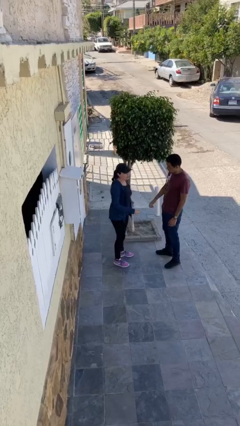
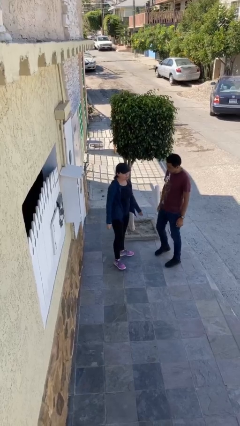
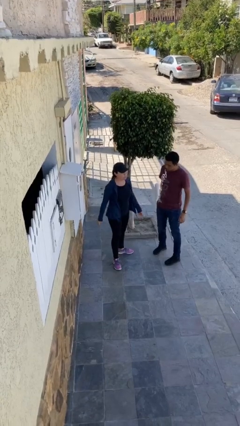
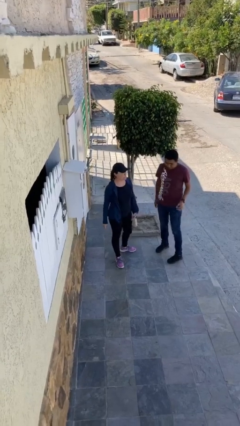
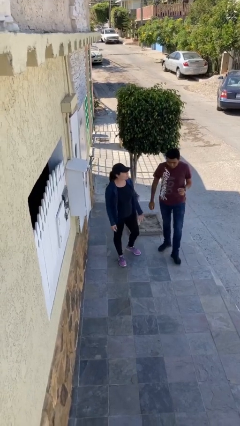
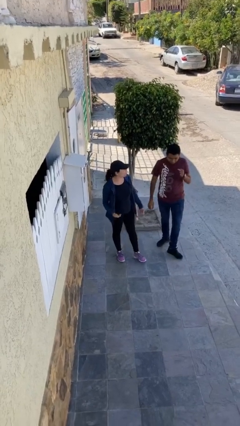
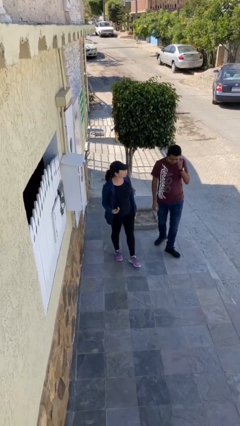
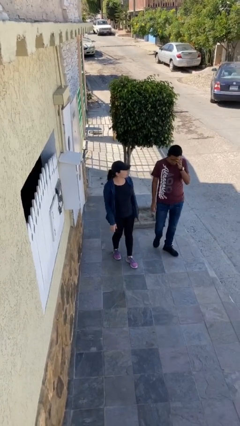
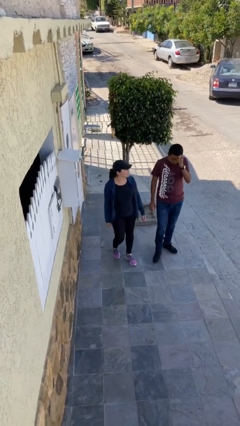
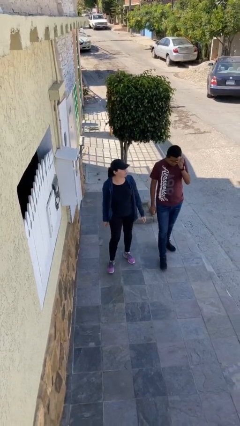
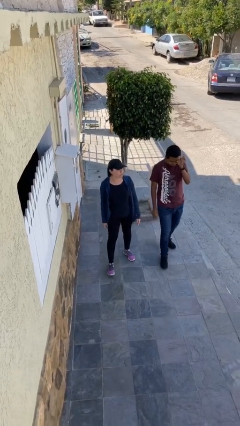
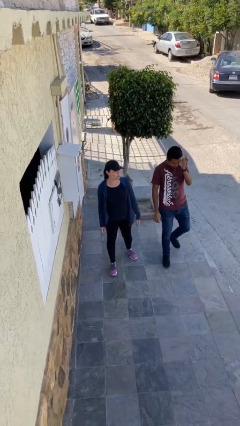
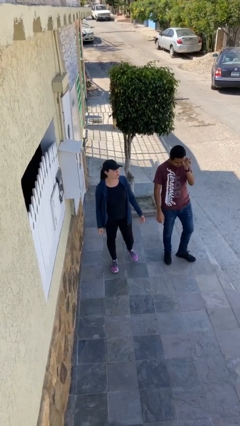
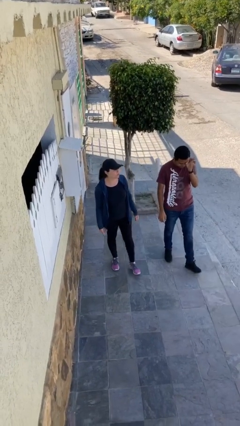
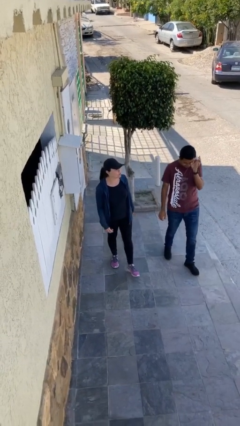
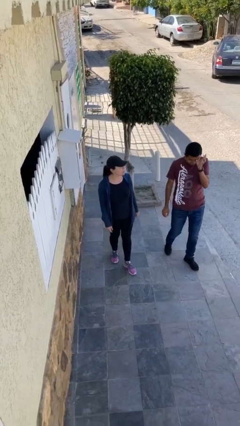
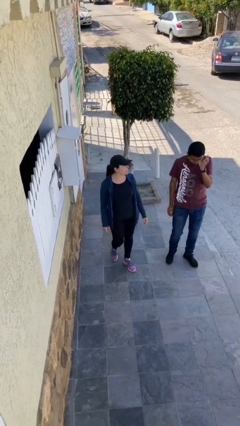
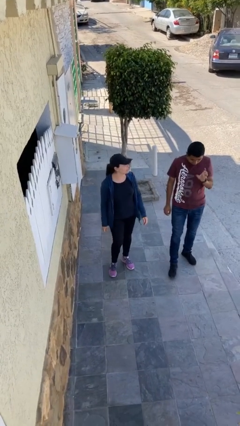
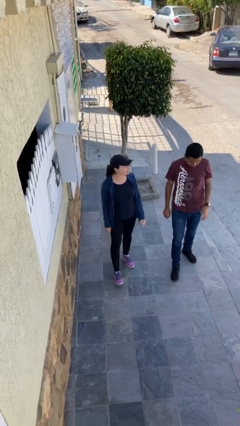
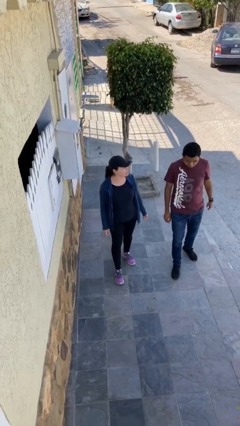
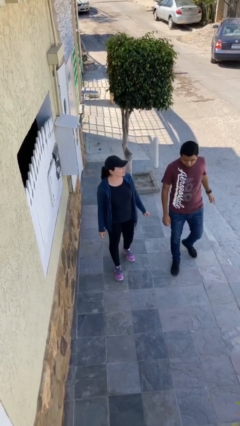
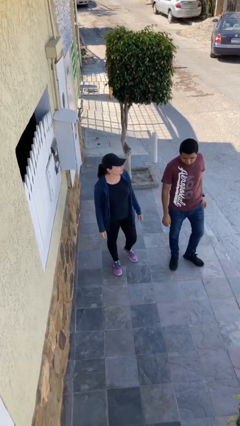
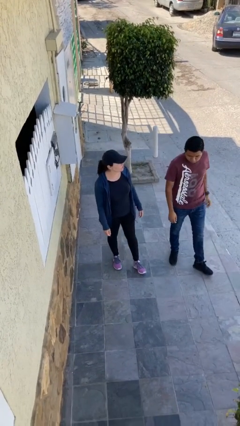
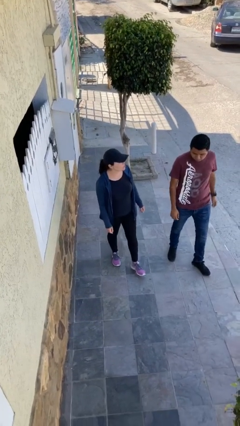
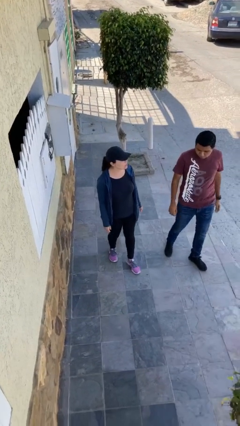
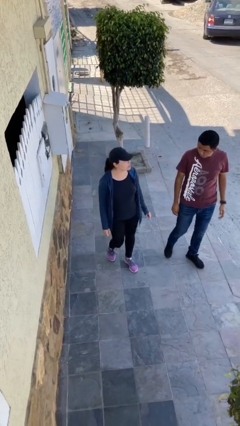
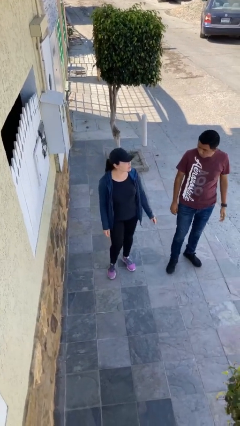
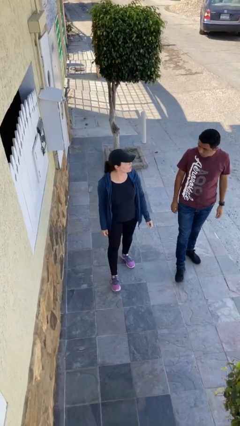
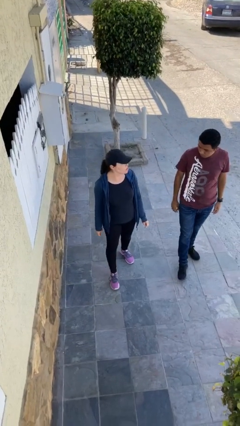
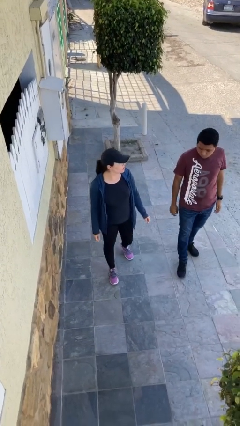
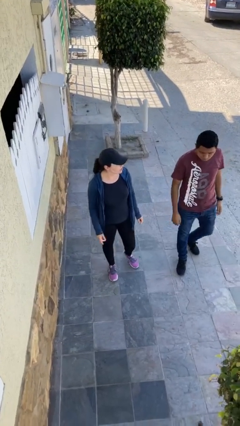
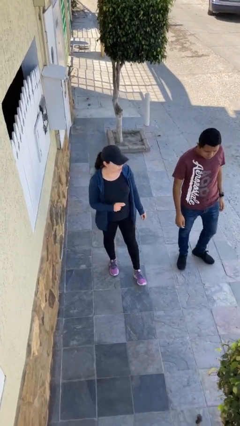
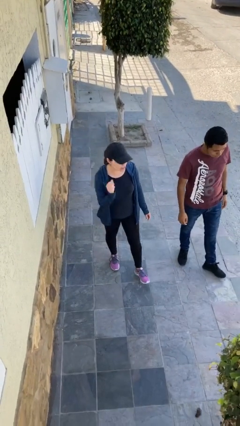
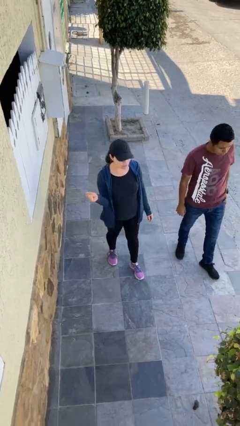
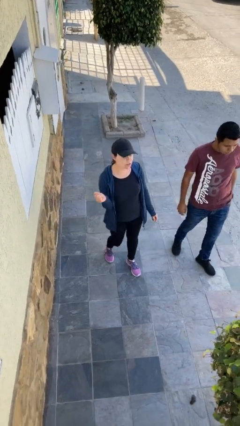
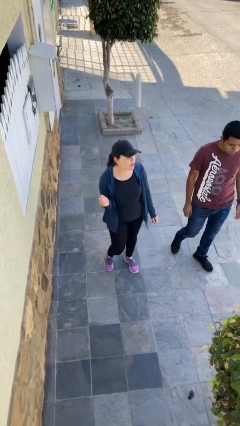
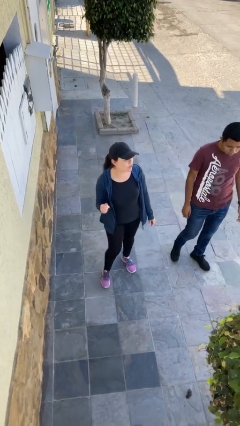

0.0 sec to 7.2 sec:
person talks to person

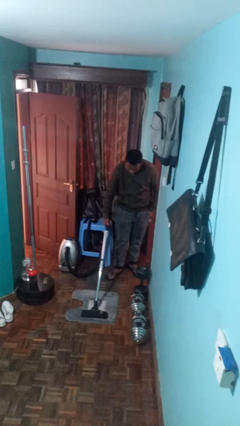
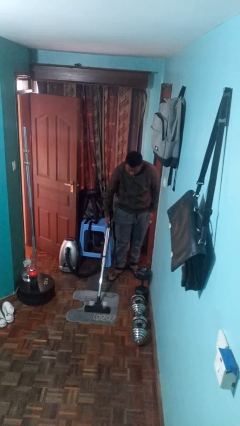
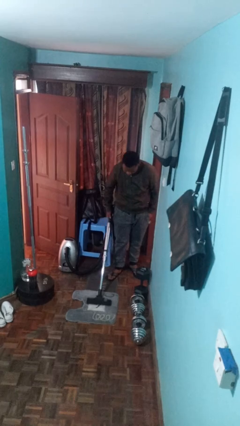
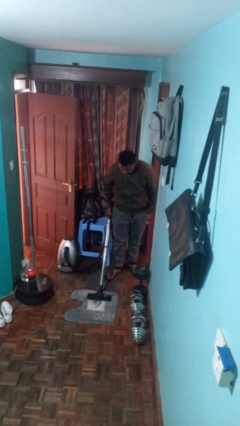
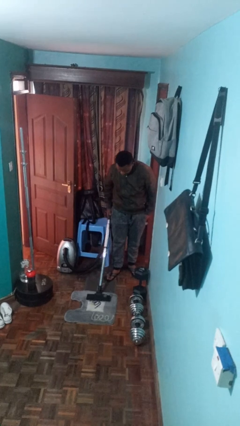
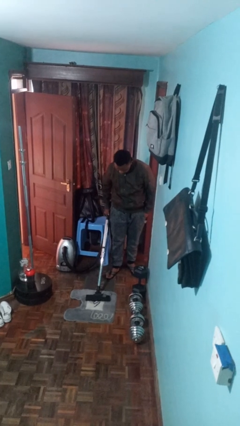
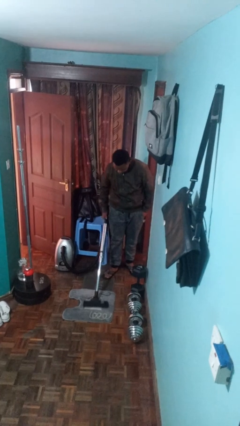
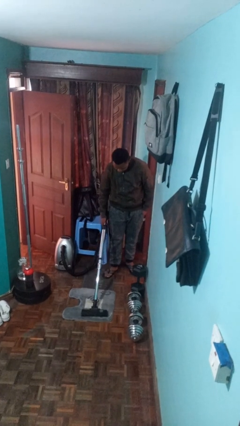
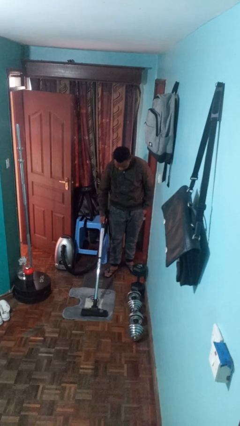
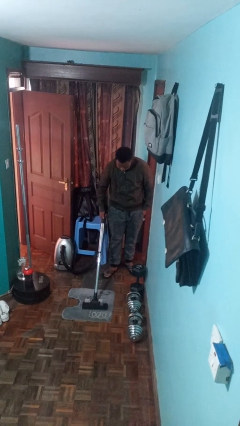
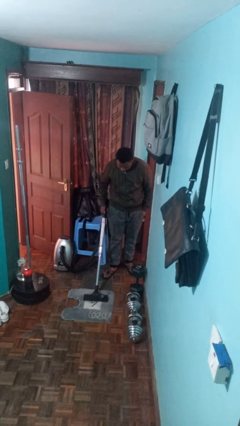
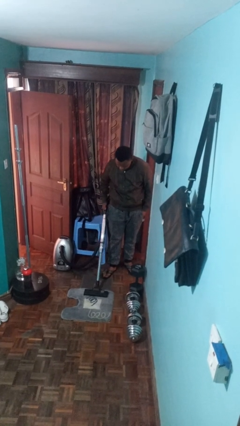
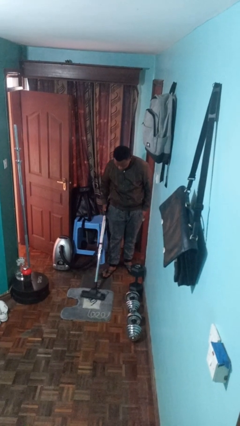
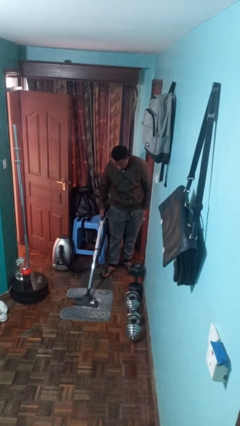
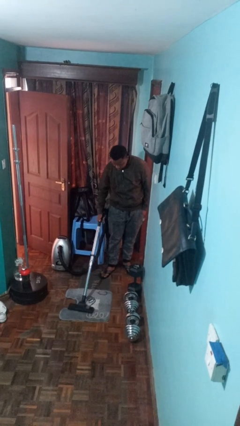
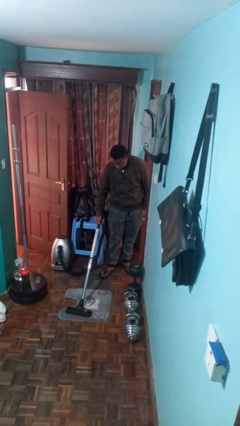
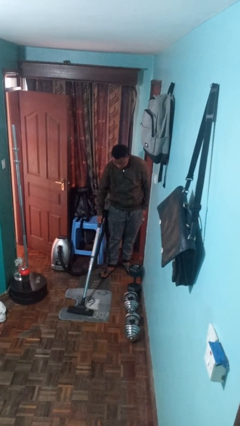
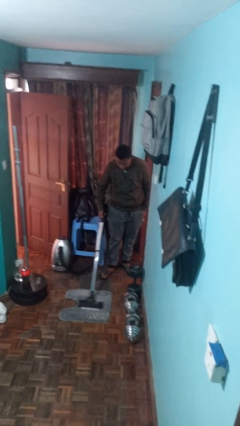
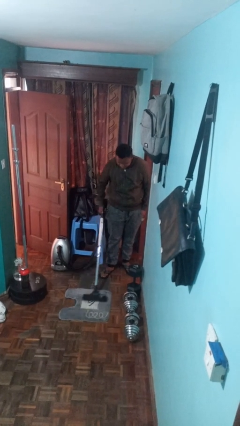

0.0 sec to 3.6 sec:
person vacuums carpet

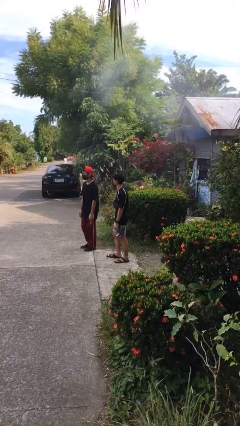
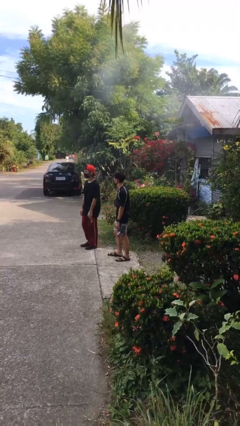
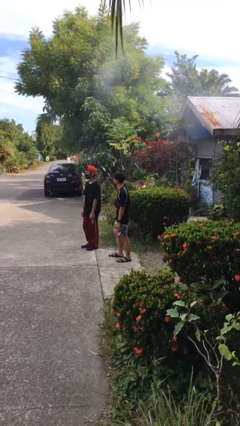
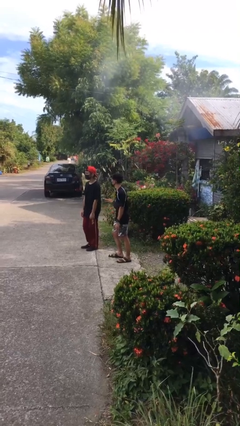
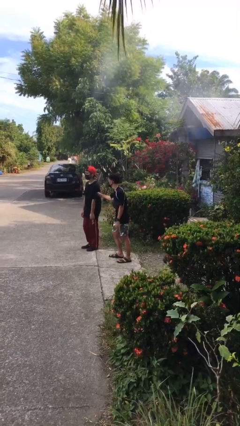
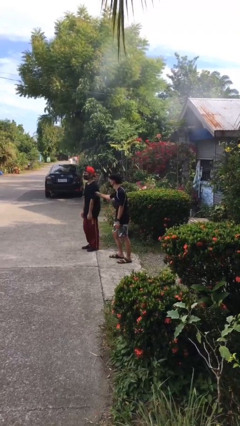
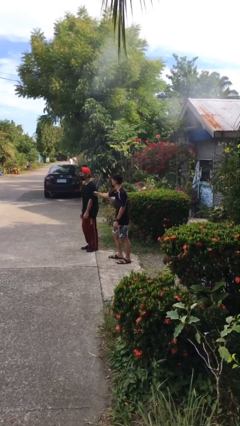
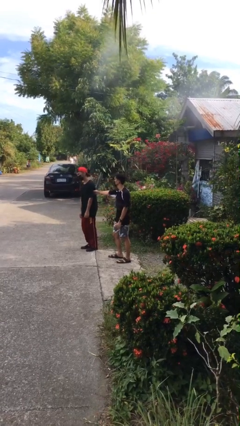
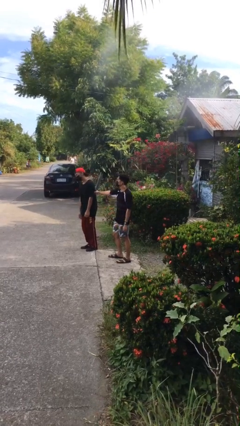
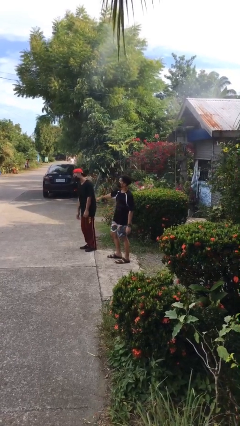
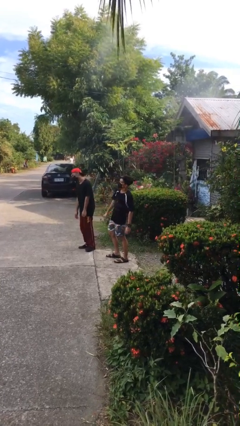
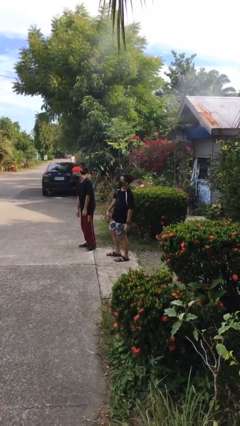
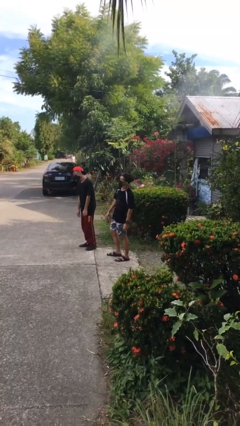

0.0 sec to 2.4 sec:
person pounds shoulders of person

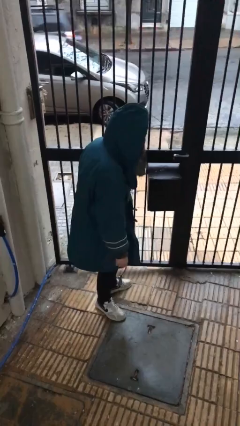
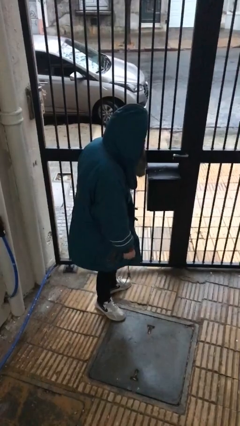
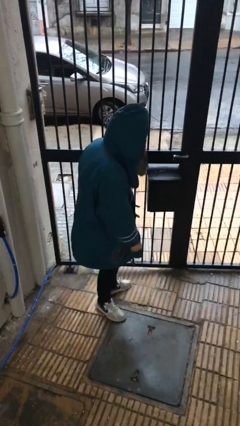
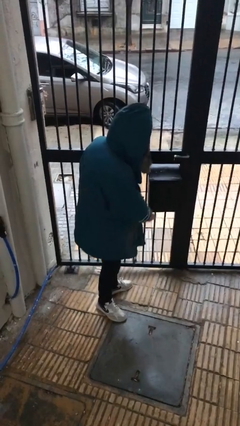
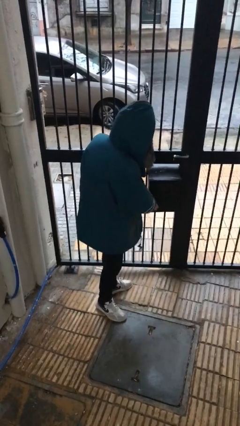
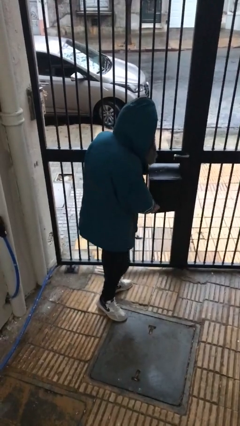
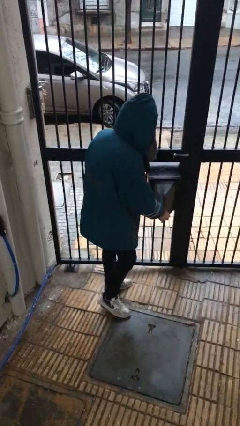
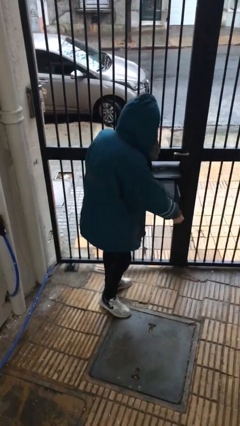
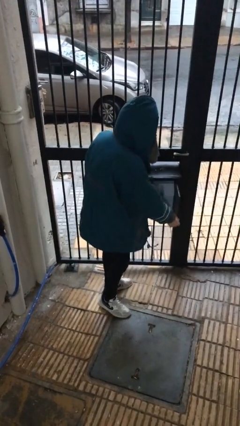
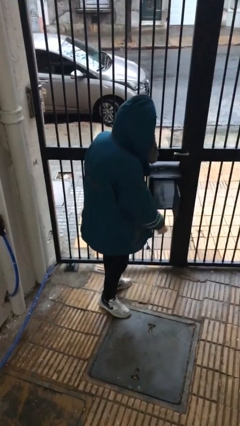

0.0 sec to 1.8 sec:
person opens mailbox

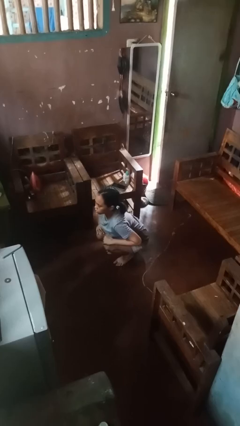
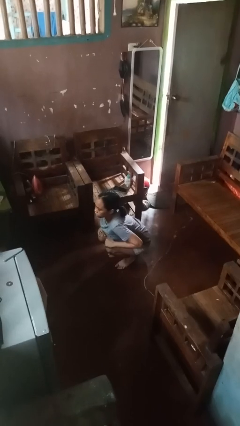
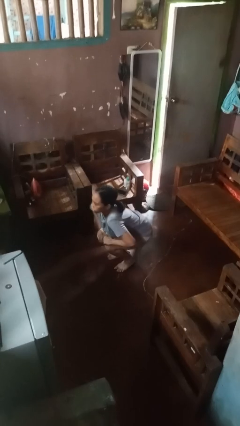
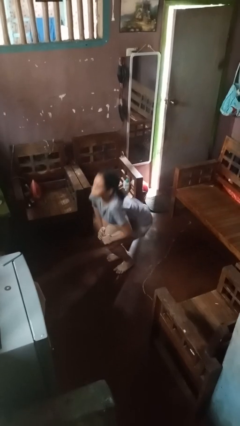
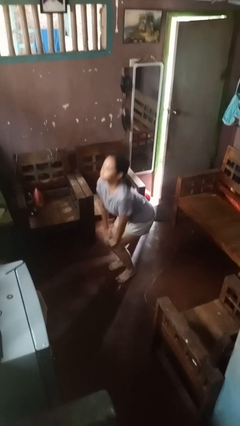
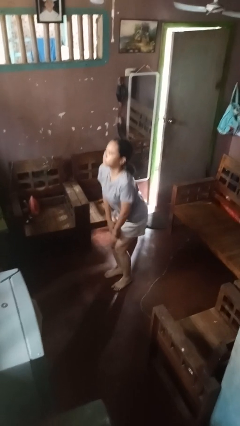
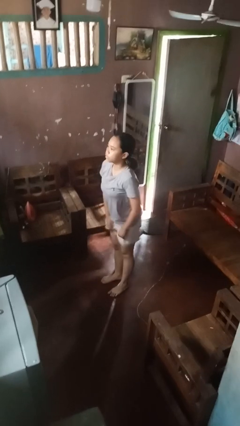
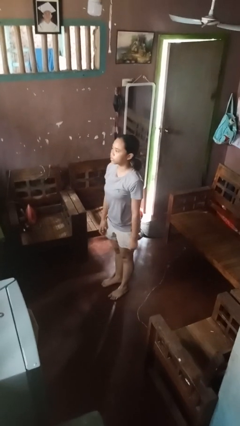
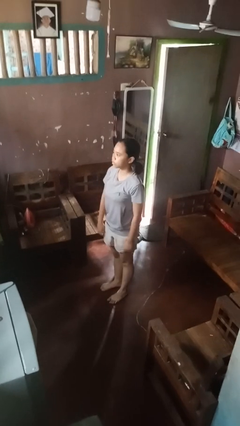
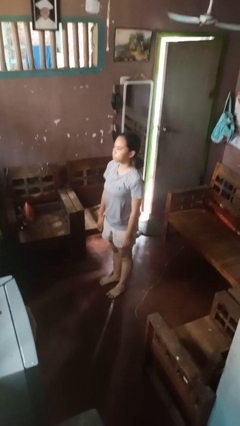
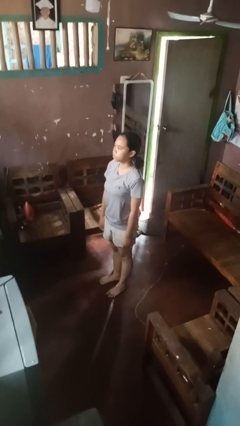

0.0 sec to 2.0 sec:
person stands up

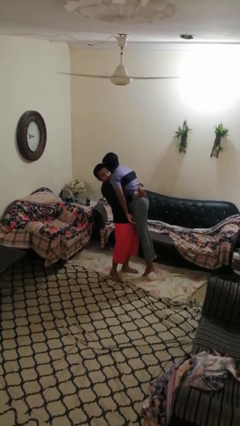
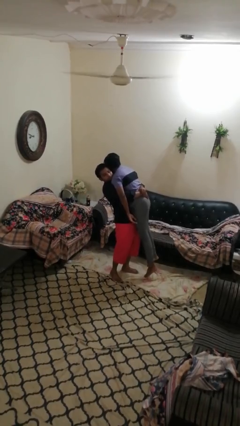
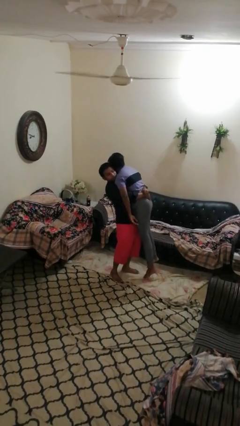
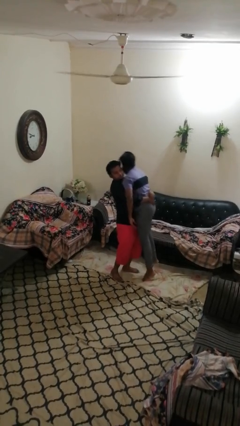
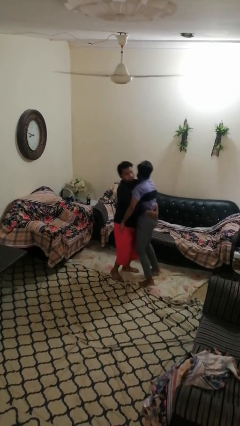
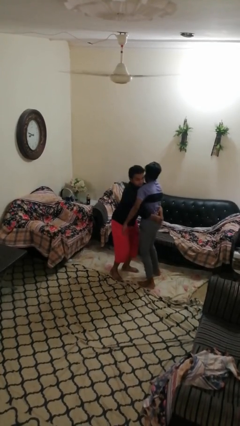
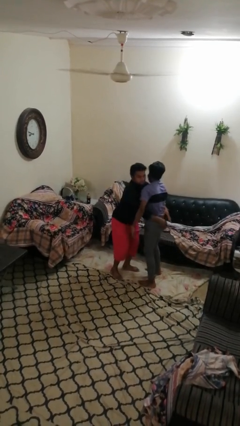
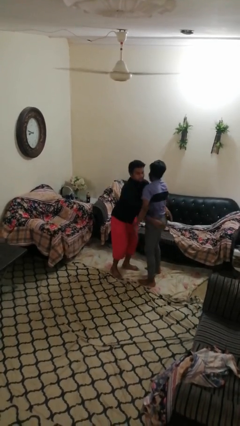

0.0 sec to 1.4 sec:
person puts down person
